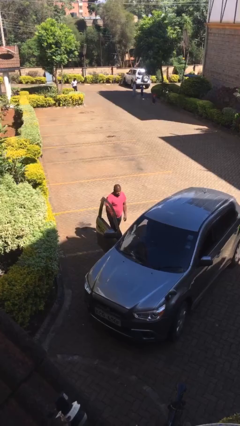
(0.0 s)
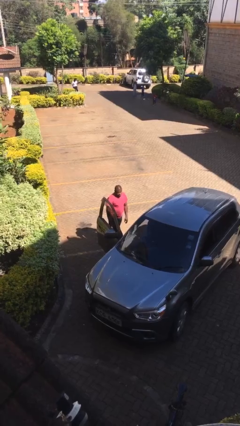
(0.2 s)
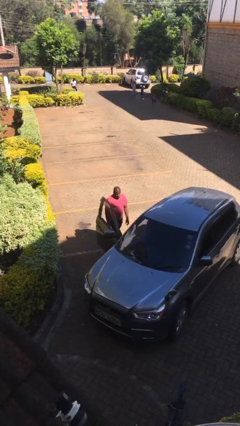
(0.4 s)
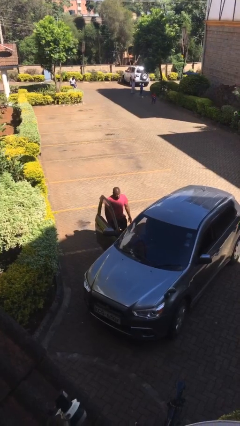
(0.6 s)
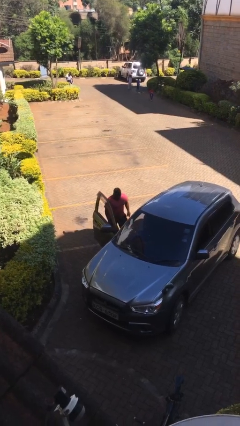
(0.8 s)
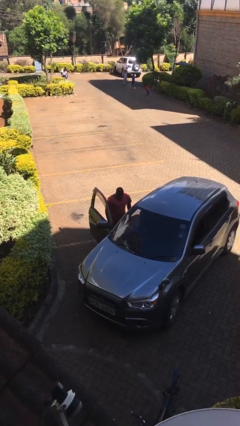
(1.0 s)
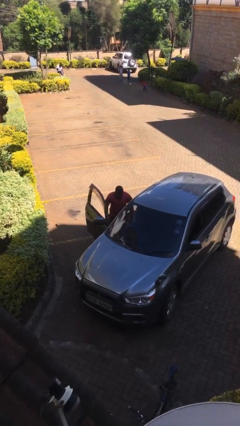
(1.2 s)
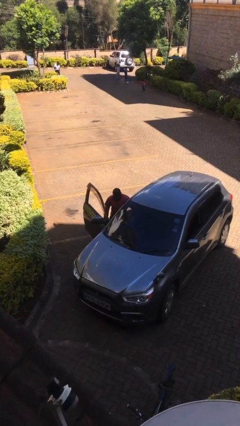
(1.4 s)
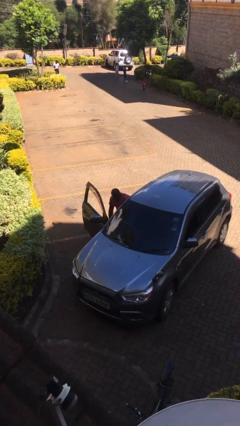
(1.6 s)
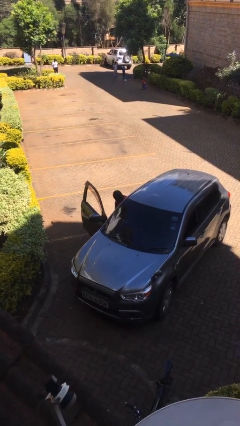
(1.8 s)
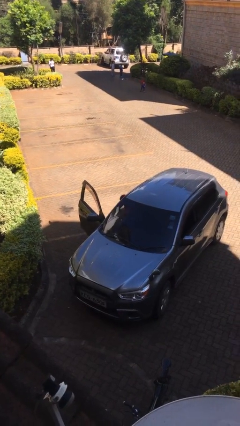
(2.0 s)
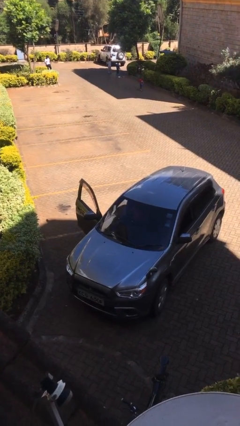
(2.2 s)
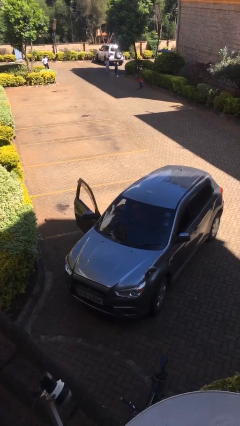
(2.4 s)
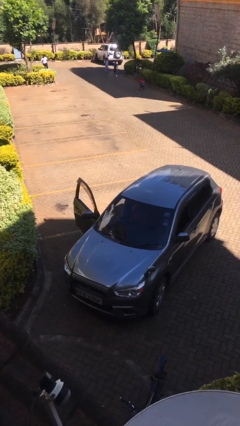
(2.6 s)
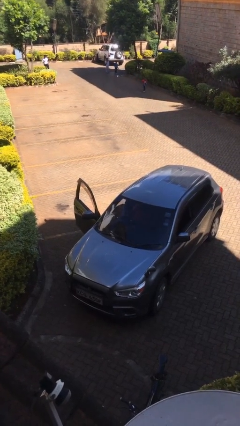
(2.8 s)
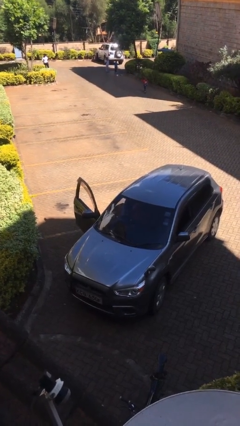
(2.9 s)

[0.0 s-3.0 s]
person enters car

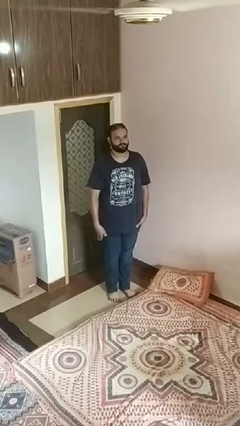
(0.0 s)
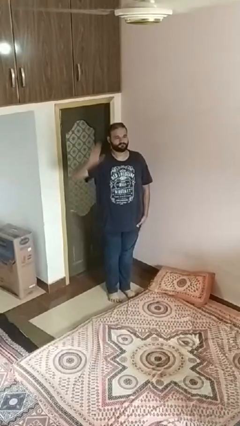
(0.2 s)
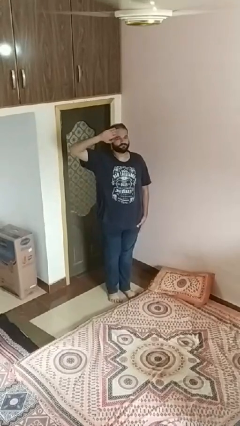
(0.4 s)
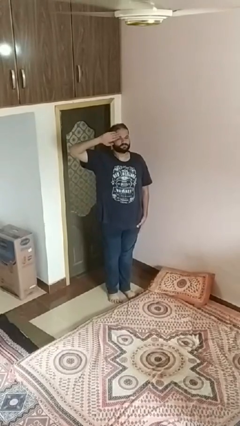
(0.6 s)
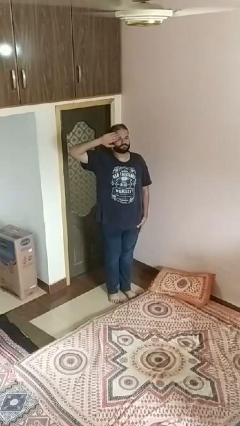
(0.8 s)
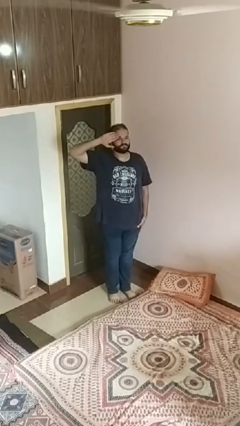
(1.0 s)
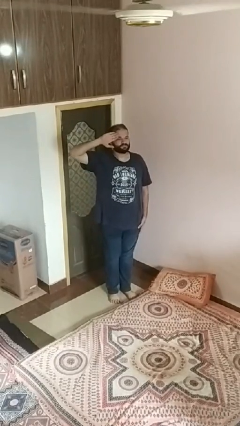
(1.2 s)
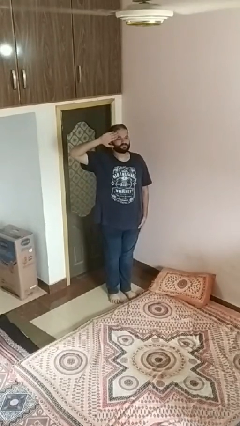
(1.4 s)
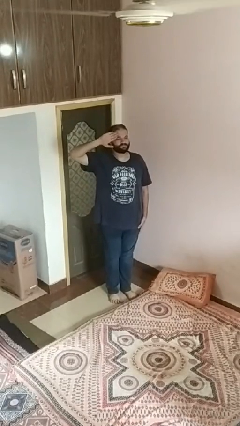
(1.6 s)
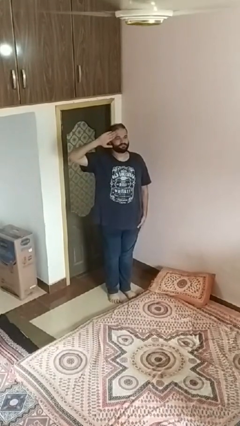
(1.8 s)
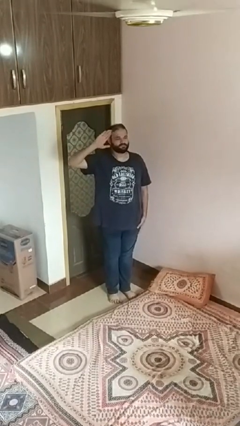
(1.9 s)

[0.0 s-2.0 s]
person salutes

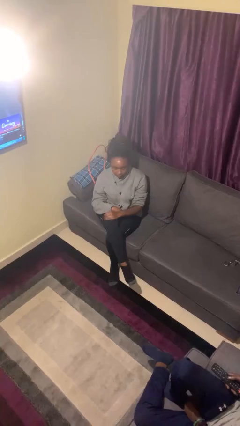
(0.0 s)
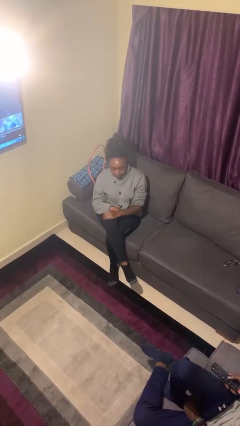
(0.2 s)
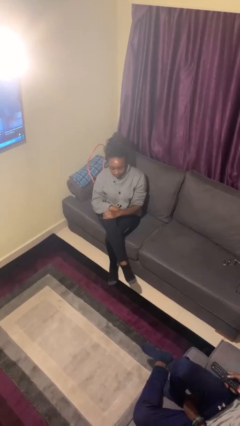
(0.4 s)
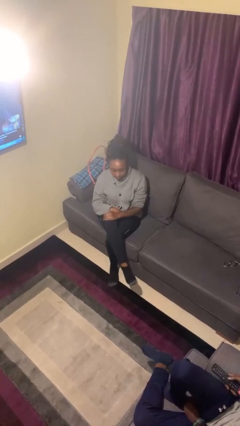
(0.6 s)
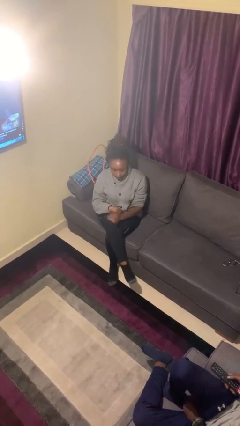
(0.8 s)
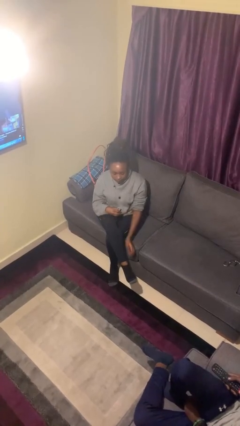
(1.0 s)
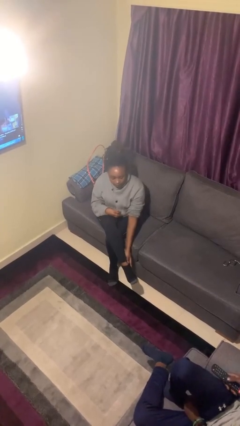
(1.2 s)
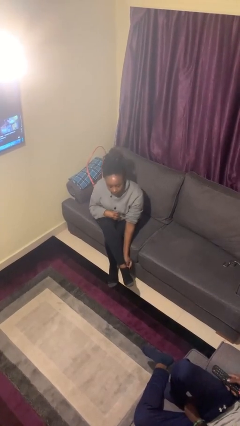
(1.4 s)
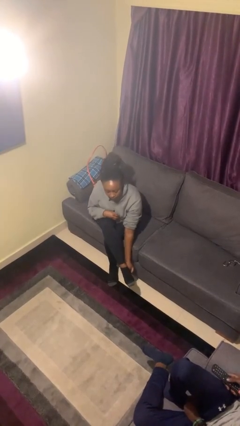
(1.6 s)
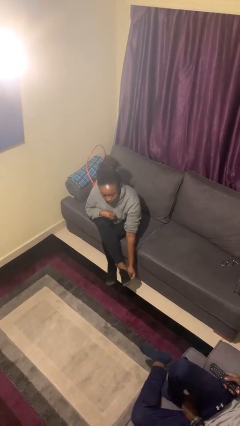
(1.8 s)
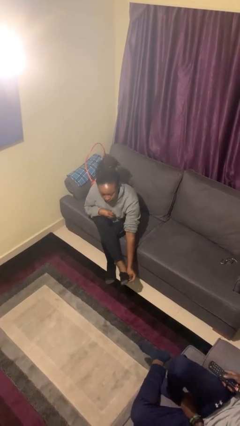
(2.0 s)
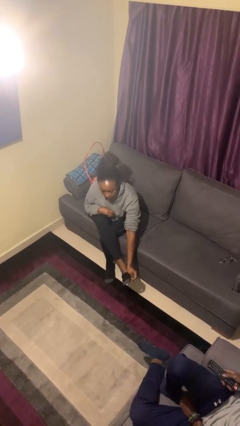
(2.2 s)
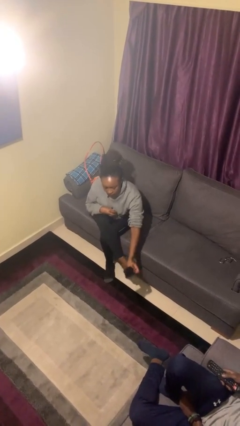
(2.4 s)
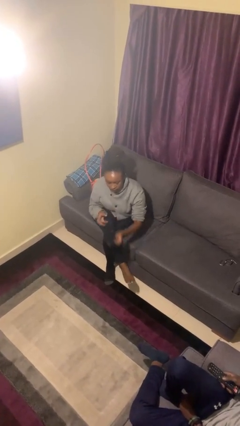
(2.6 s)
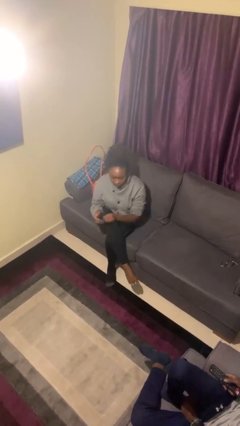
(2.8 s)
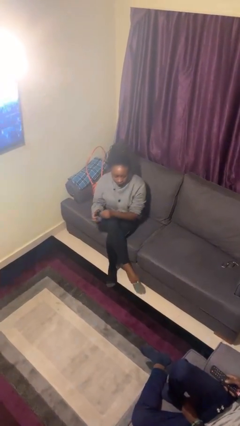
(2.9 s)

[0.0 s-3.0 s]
person takes off socks

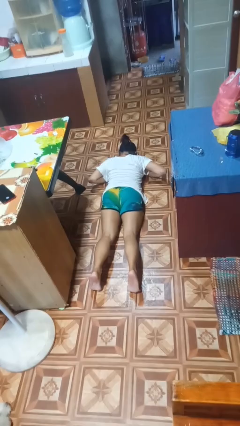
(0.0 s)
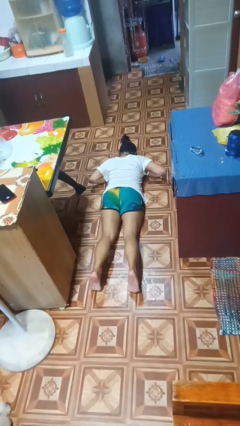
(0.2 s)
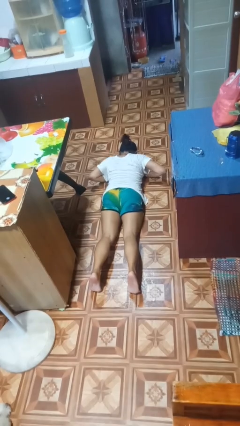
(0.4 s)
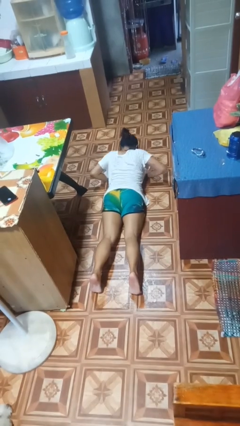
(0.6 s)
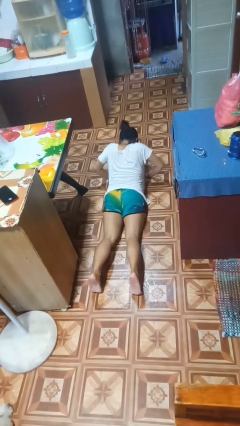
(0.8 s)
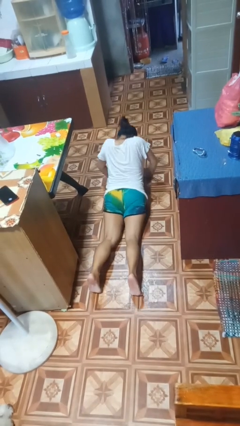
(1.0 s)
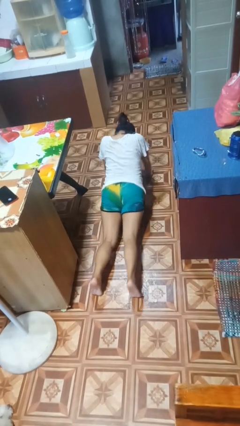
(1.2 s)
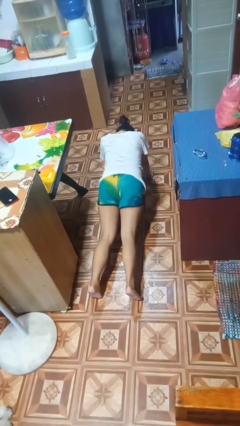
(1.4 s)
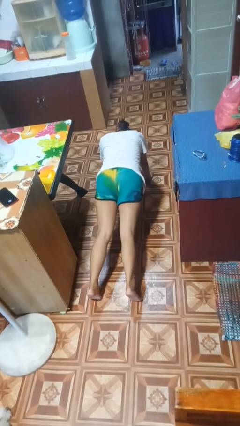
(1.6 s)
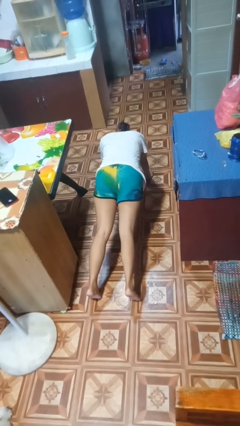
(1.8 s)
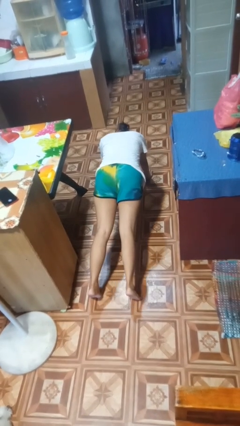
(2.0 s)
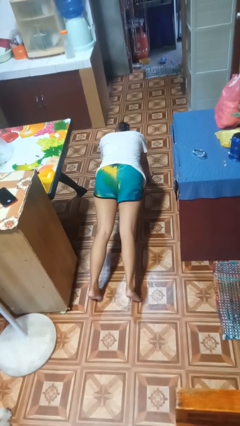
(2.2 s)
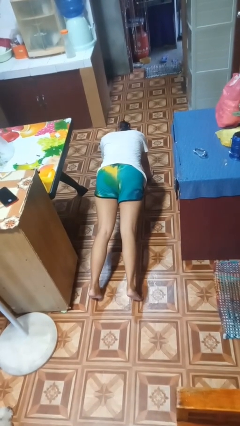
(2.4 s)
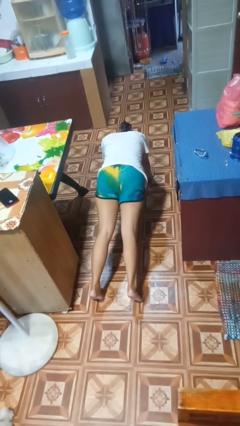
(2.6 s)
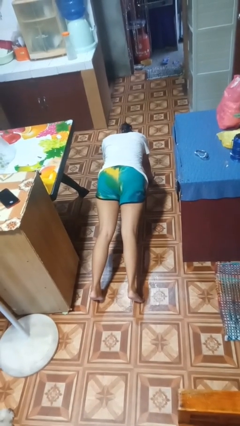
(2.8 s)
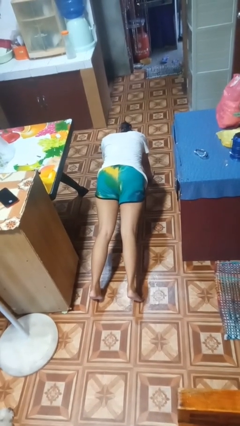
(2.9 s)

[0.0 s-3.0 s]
person exercises with pushup

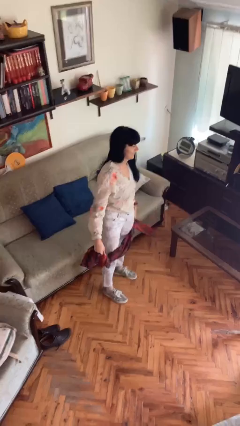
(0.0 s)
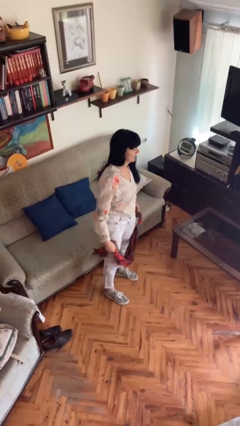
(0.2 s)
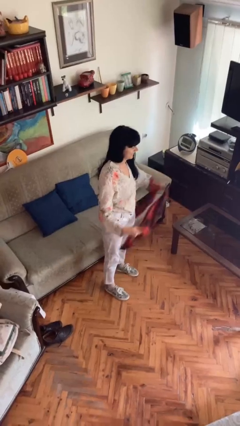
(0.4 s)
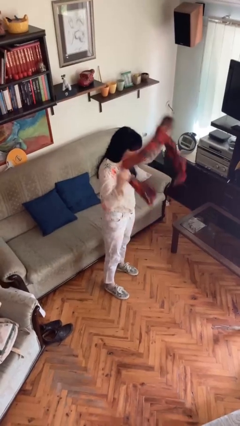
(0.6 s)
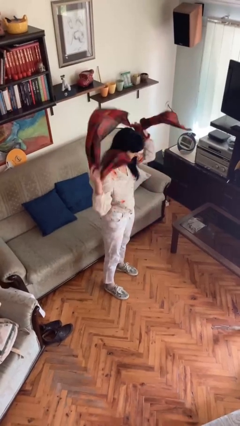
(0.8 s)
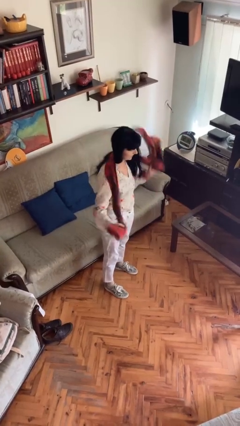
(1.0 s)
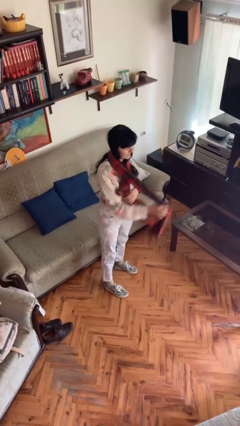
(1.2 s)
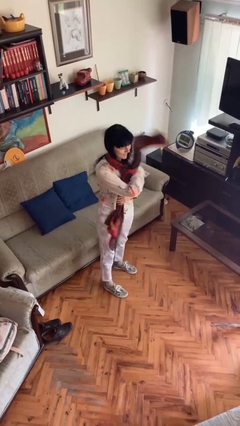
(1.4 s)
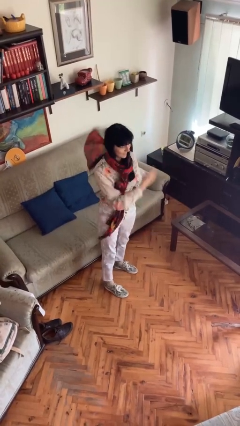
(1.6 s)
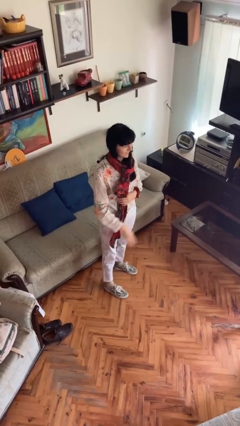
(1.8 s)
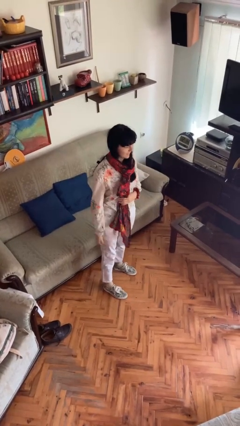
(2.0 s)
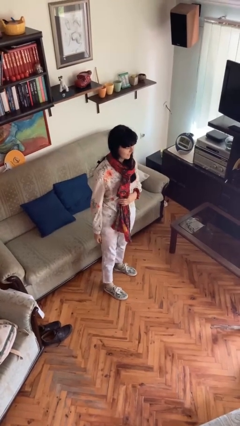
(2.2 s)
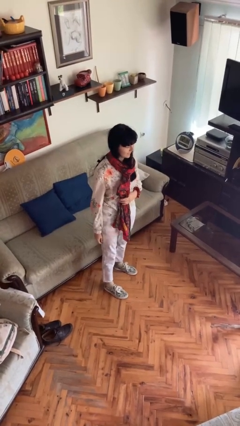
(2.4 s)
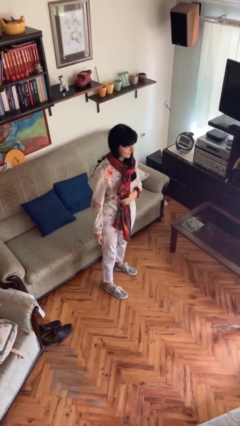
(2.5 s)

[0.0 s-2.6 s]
person puts on scarf

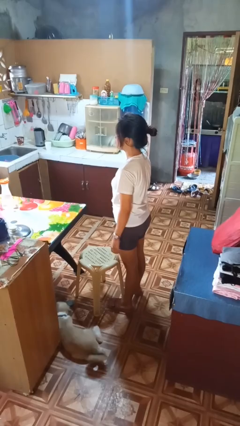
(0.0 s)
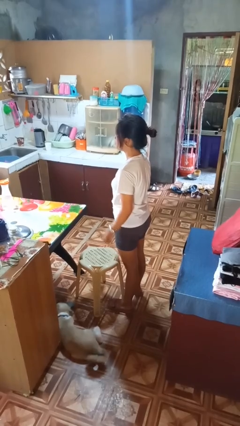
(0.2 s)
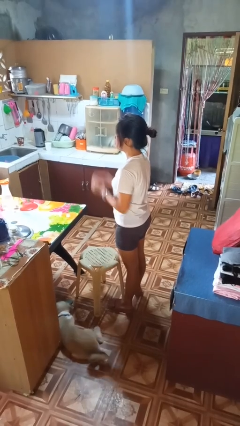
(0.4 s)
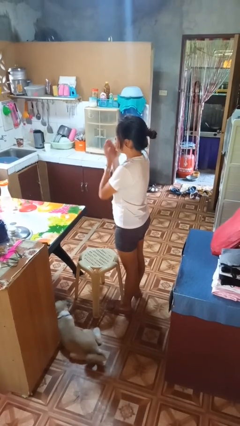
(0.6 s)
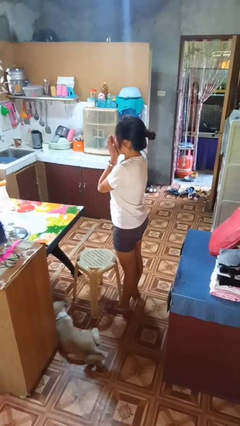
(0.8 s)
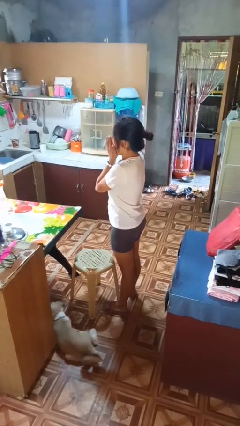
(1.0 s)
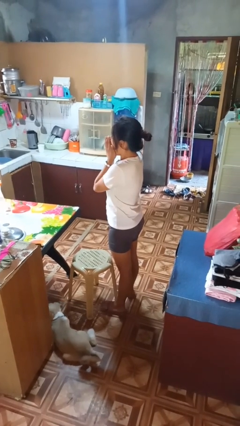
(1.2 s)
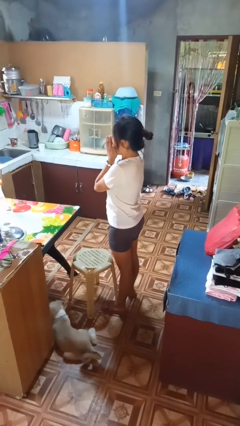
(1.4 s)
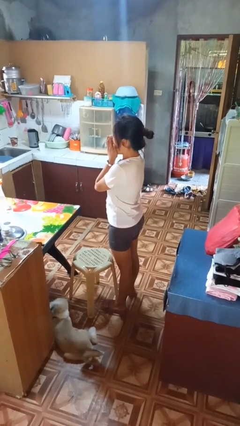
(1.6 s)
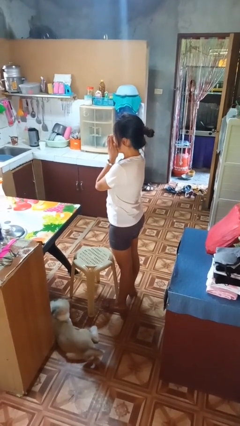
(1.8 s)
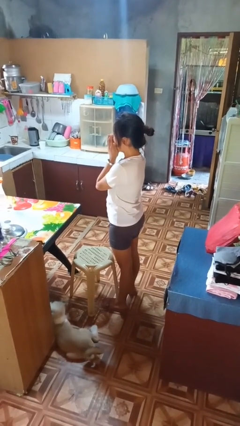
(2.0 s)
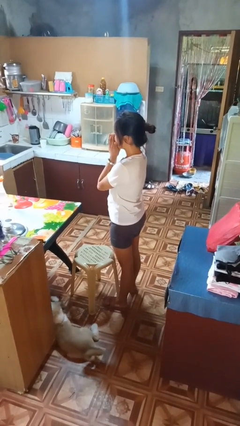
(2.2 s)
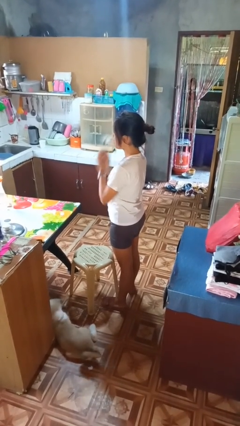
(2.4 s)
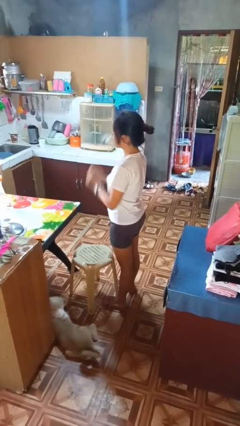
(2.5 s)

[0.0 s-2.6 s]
person yawns

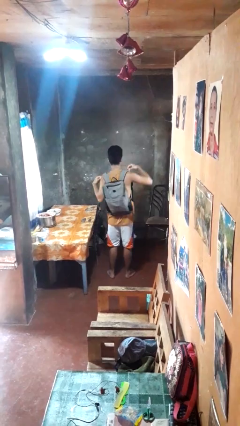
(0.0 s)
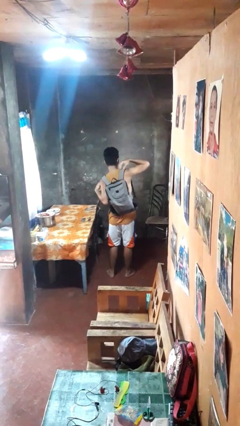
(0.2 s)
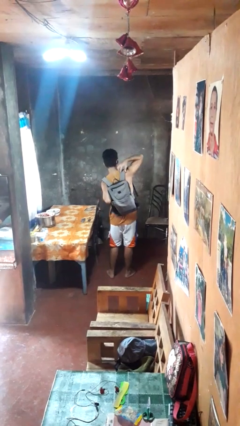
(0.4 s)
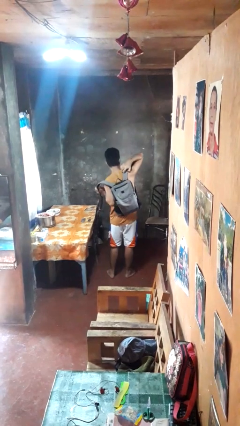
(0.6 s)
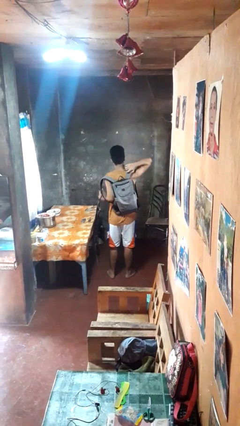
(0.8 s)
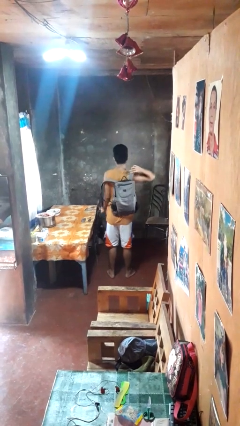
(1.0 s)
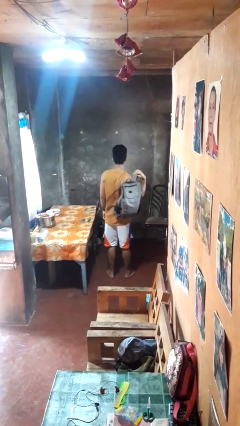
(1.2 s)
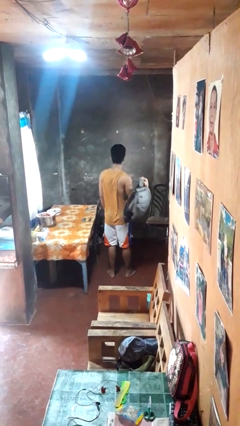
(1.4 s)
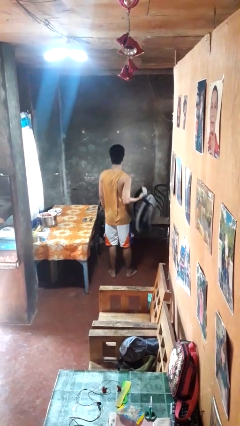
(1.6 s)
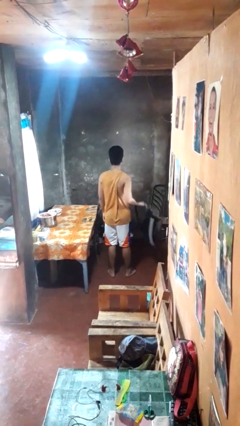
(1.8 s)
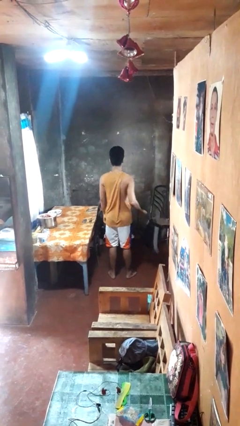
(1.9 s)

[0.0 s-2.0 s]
person takes off backpack
